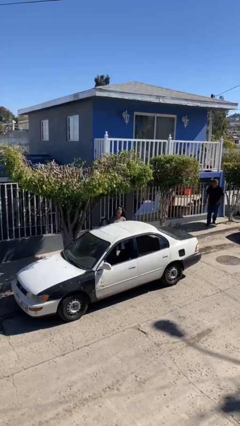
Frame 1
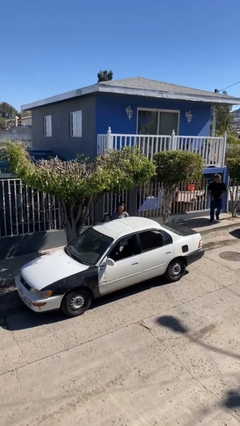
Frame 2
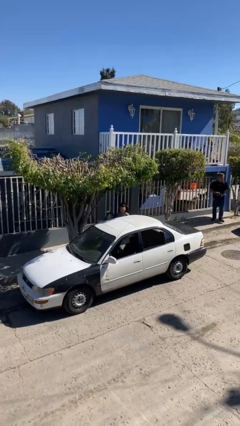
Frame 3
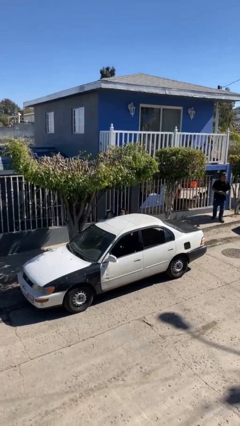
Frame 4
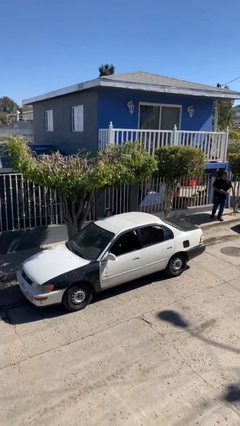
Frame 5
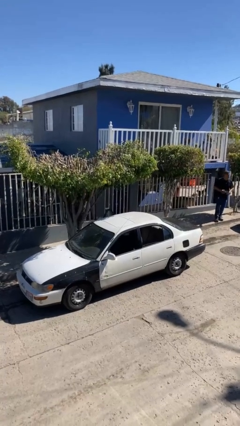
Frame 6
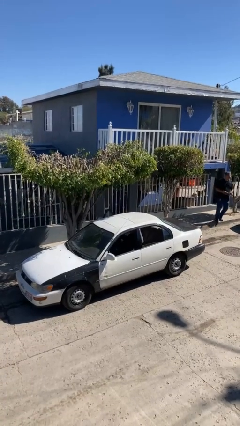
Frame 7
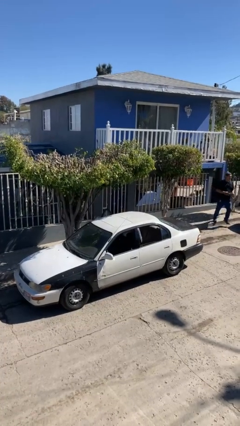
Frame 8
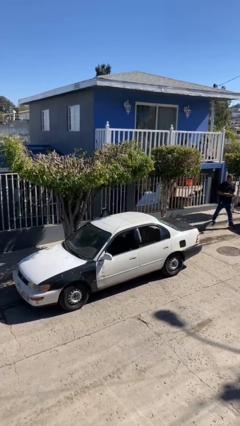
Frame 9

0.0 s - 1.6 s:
person enters car

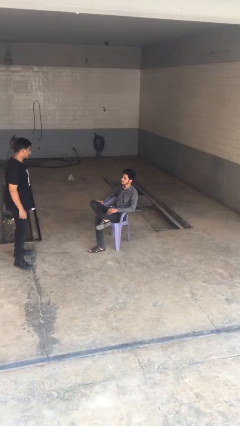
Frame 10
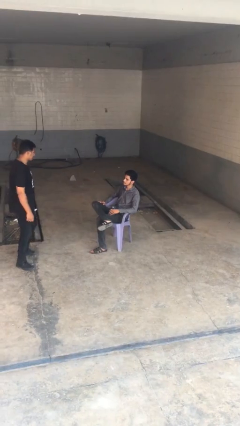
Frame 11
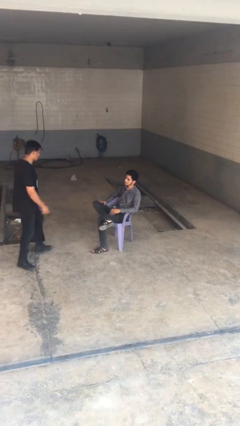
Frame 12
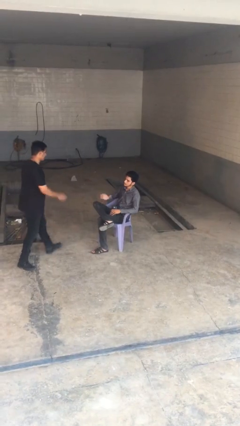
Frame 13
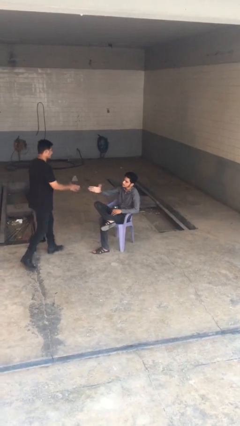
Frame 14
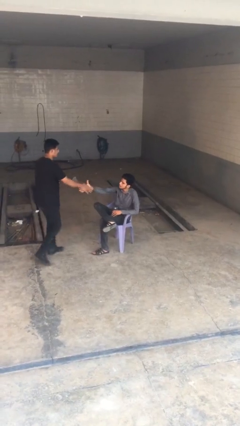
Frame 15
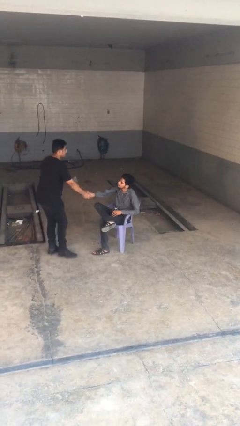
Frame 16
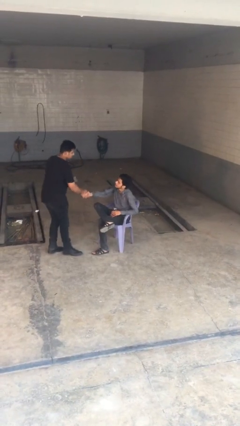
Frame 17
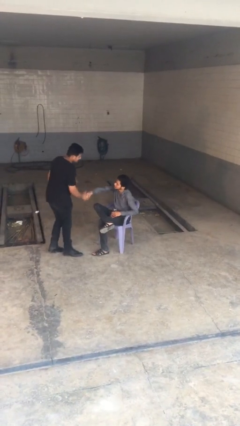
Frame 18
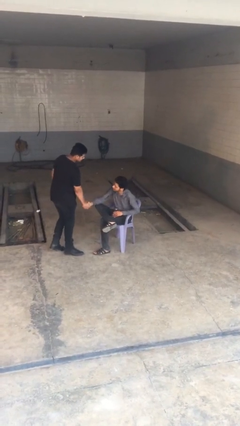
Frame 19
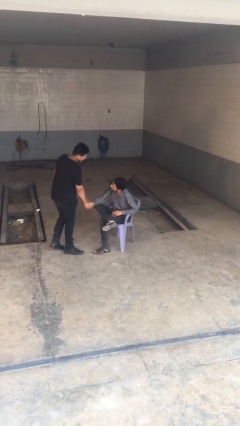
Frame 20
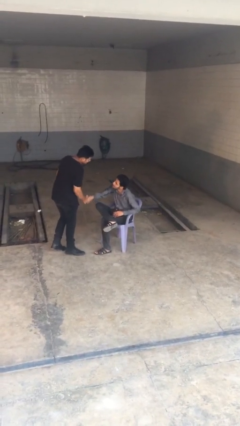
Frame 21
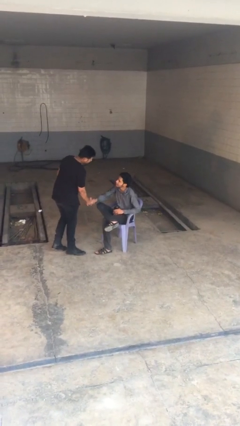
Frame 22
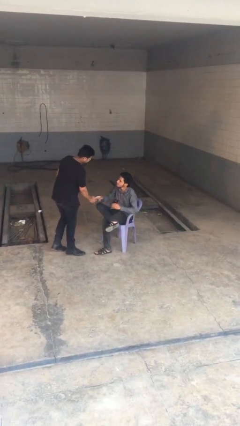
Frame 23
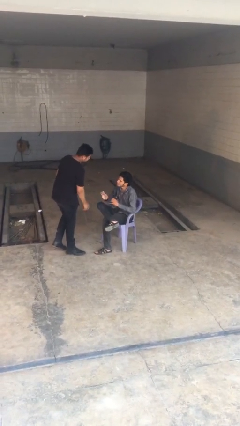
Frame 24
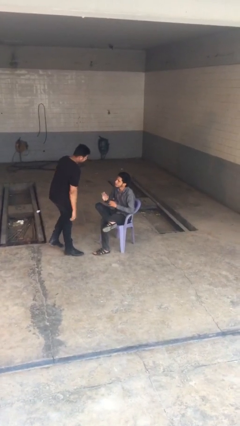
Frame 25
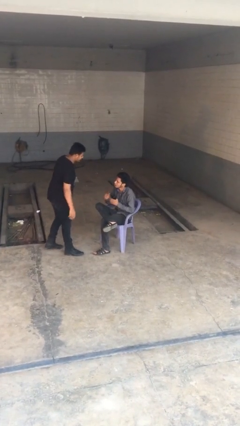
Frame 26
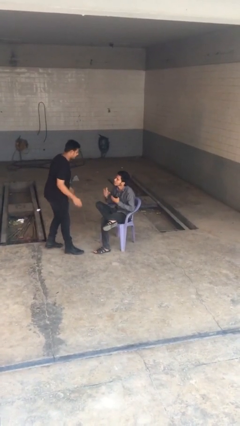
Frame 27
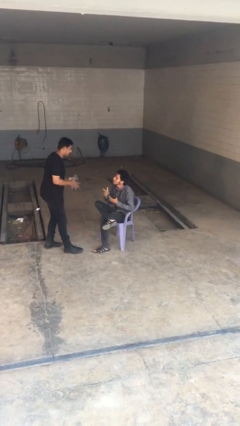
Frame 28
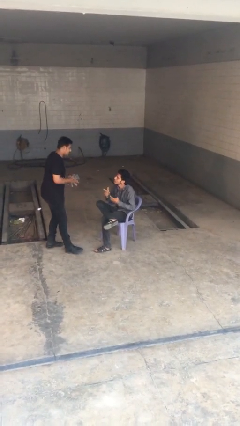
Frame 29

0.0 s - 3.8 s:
person shakes hand

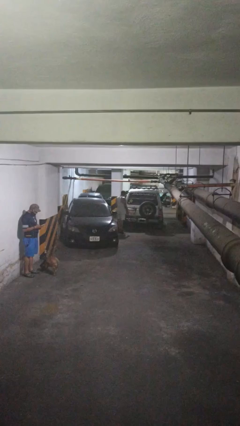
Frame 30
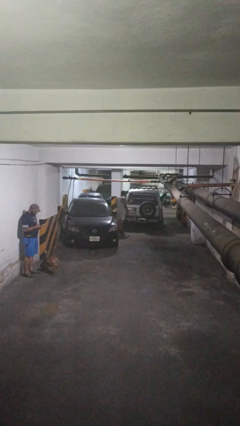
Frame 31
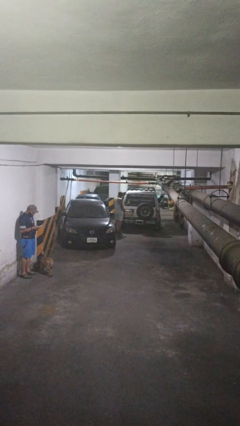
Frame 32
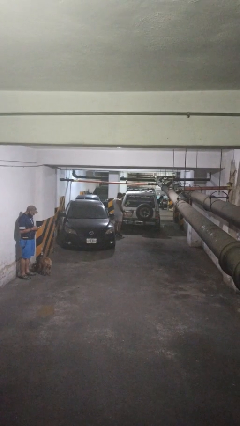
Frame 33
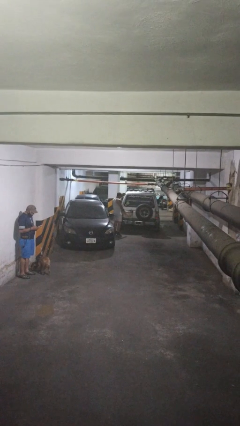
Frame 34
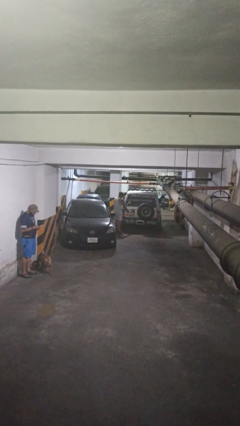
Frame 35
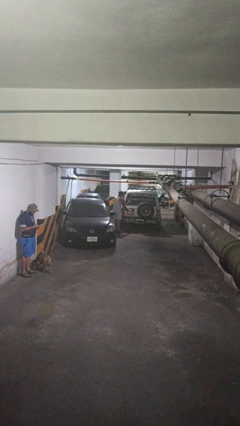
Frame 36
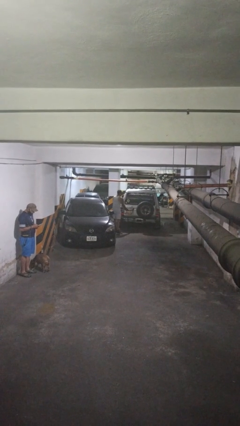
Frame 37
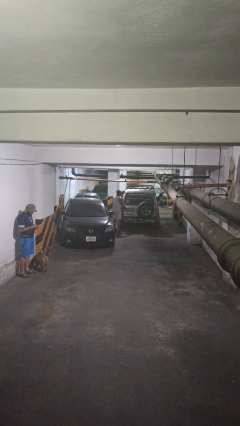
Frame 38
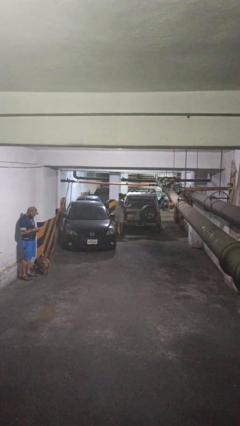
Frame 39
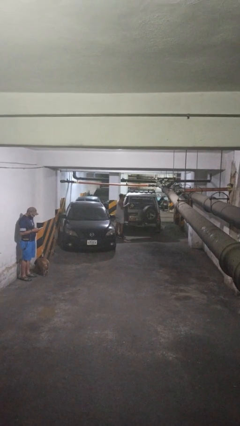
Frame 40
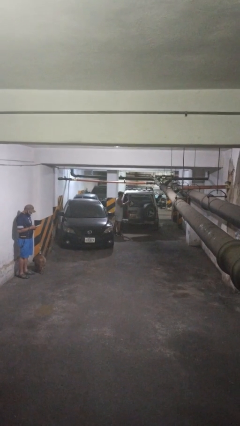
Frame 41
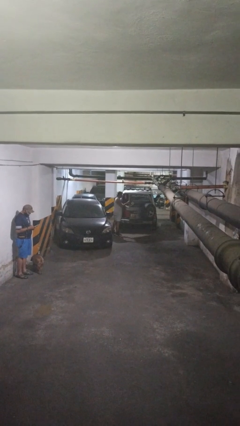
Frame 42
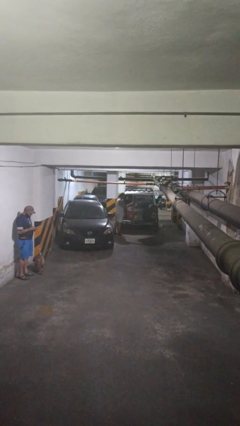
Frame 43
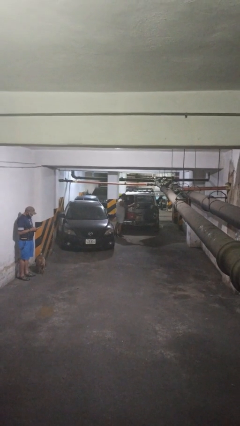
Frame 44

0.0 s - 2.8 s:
person opens car trunk

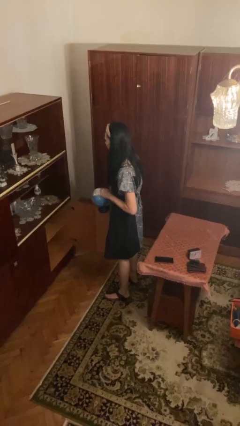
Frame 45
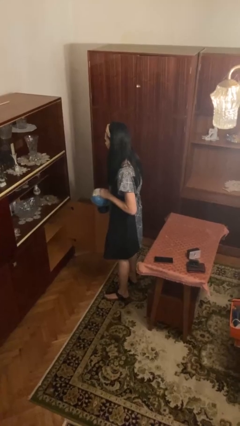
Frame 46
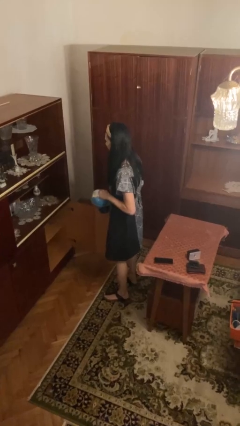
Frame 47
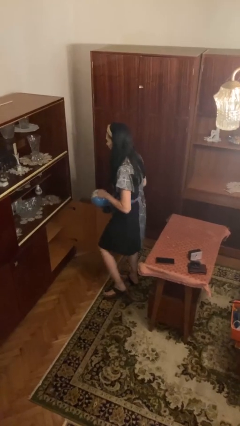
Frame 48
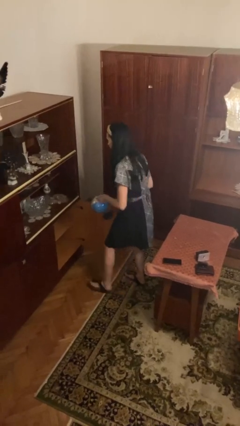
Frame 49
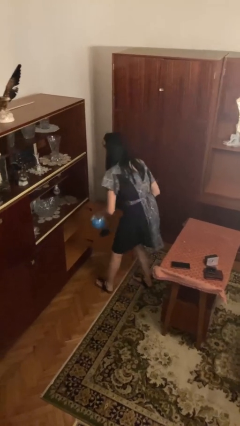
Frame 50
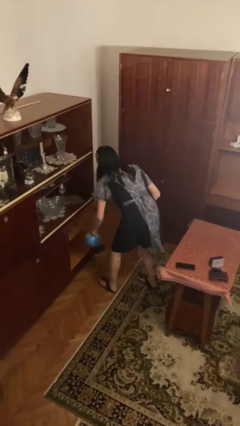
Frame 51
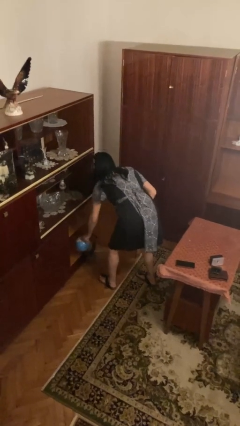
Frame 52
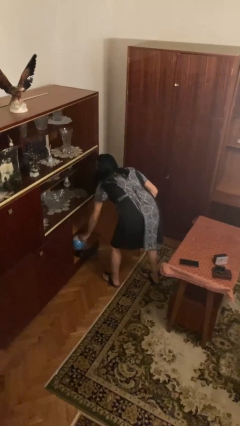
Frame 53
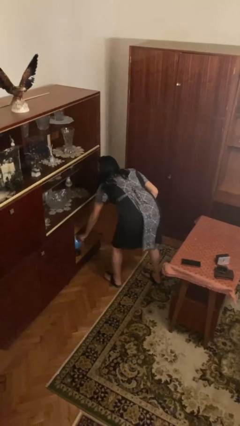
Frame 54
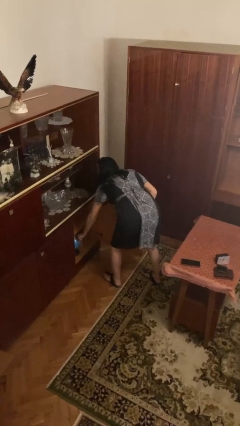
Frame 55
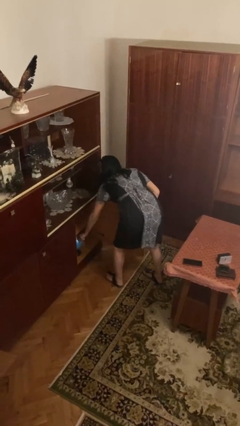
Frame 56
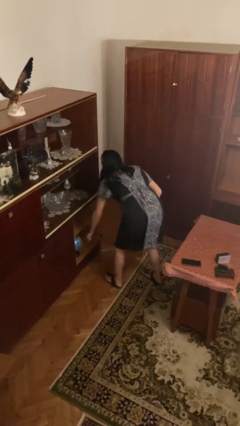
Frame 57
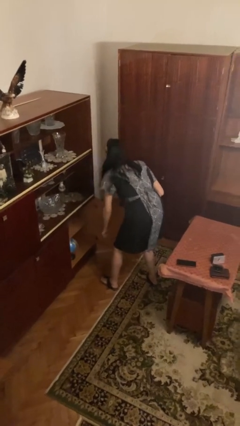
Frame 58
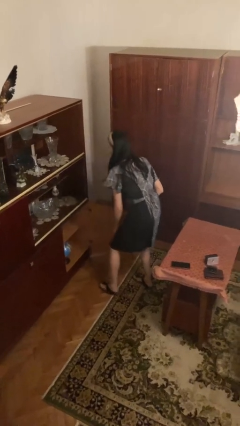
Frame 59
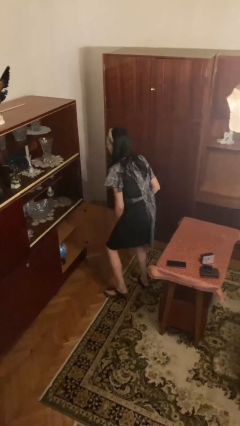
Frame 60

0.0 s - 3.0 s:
person puts down object into cabinet

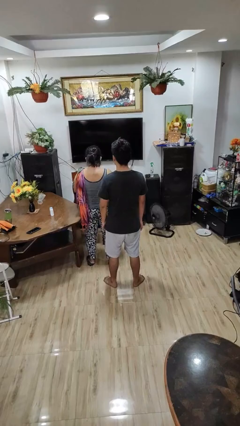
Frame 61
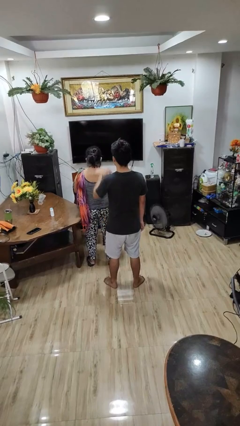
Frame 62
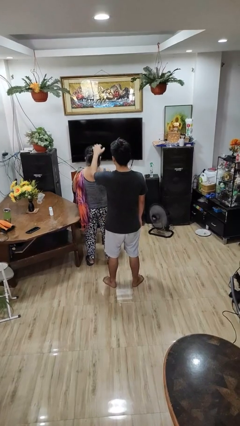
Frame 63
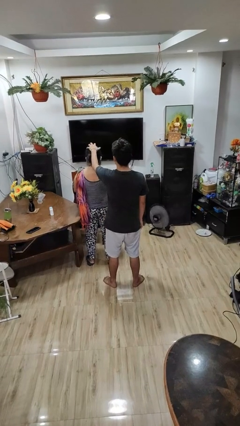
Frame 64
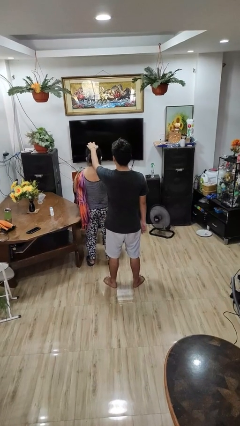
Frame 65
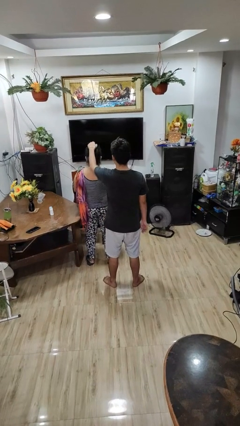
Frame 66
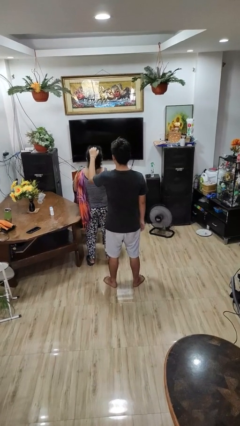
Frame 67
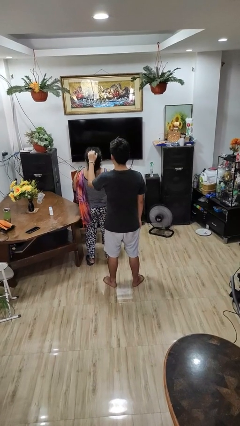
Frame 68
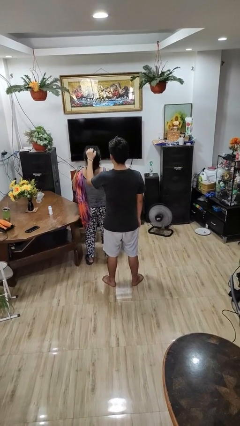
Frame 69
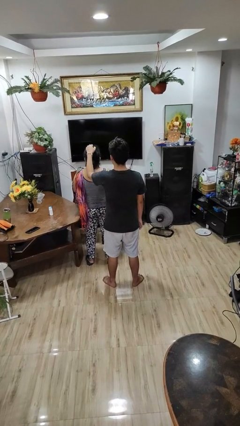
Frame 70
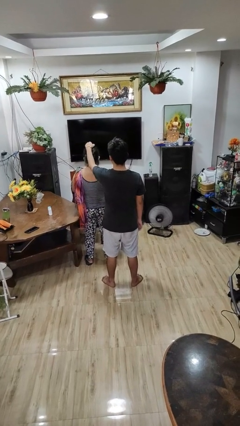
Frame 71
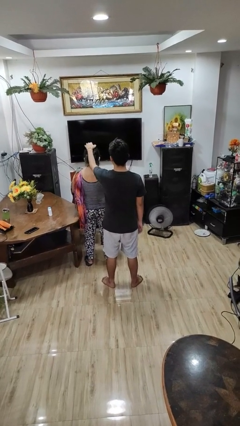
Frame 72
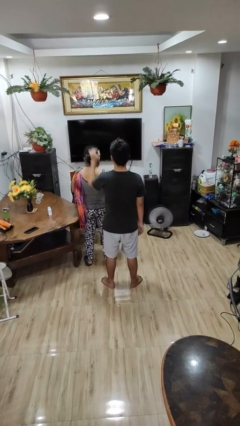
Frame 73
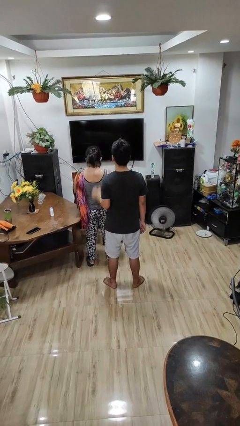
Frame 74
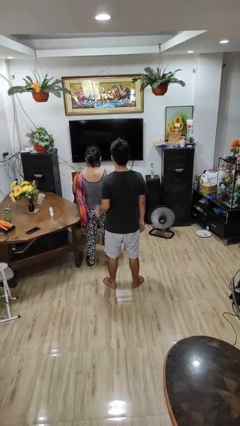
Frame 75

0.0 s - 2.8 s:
person grabs person by hair

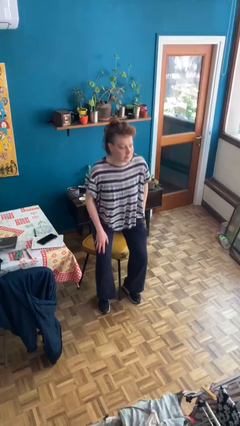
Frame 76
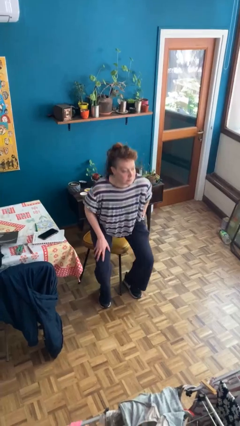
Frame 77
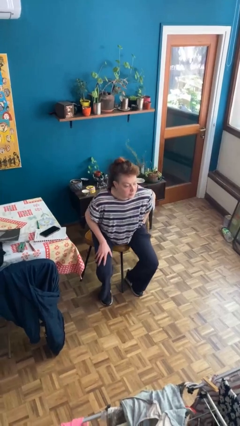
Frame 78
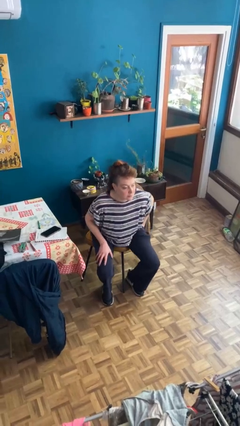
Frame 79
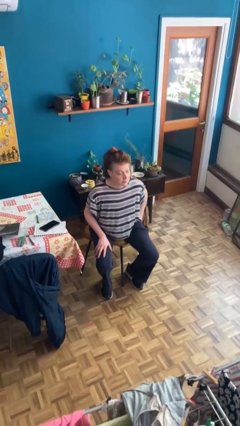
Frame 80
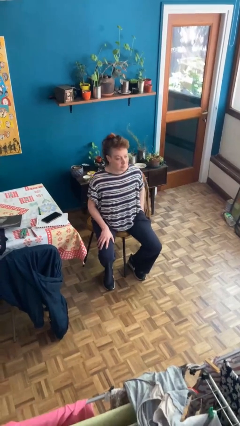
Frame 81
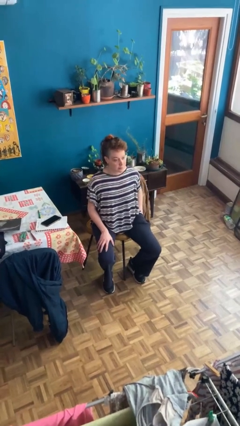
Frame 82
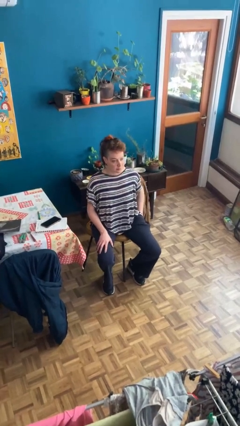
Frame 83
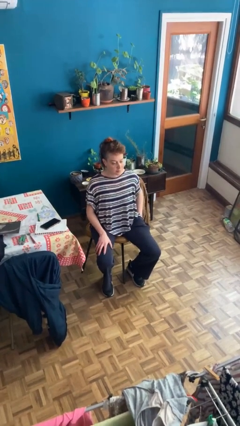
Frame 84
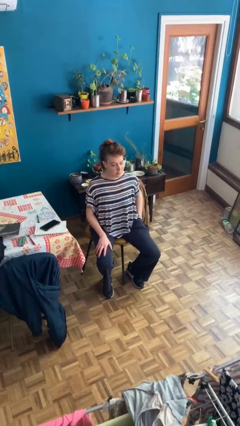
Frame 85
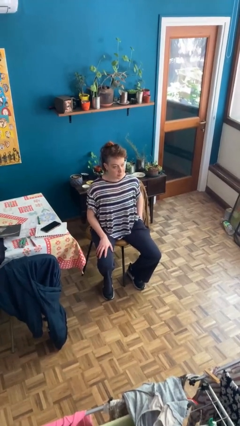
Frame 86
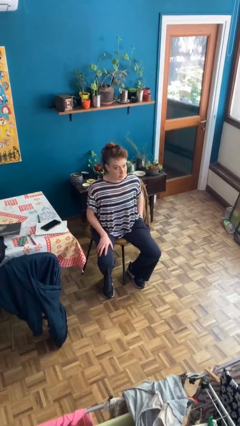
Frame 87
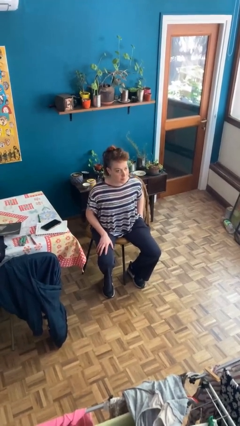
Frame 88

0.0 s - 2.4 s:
person sits down

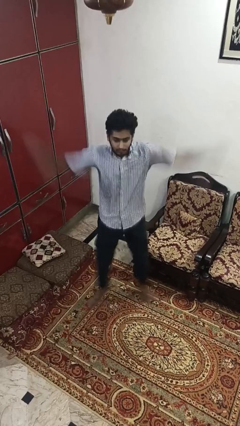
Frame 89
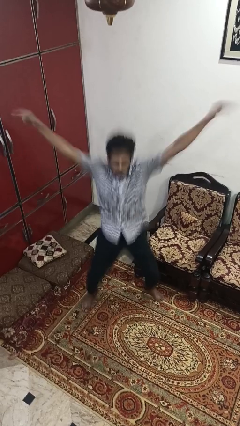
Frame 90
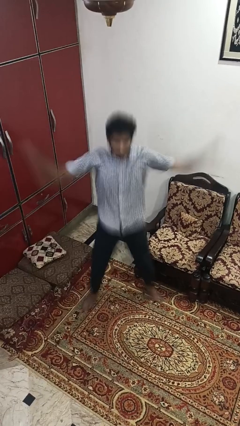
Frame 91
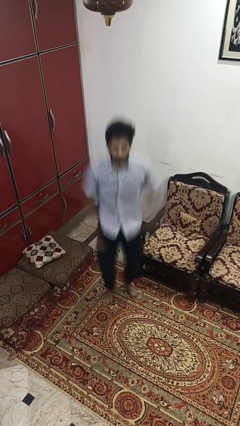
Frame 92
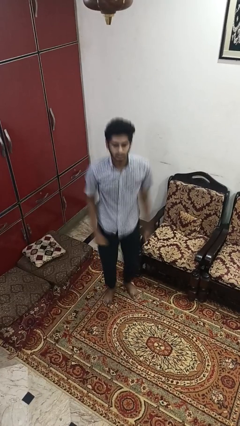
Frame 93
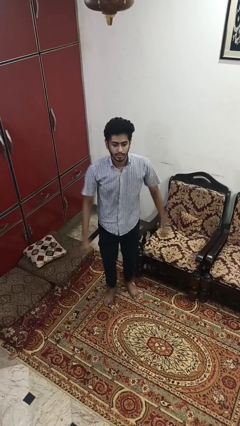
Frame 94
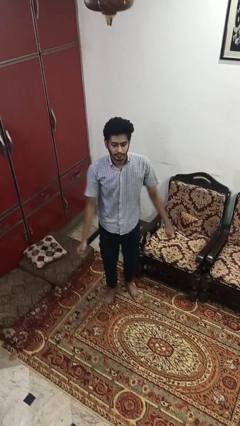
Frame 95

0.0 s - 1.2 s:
person exercises with jumping jacks
